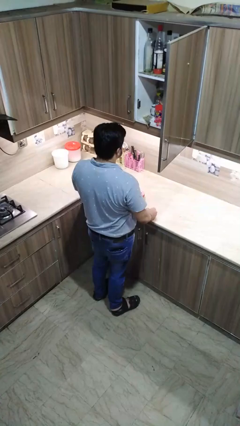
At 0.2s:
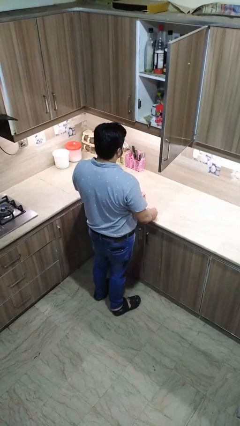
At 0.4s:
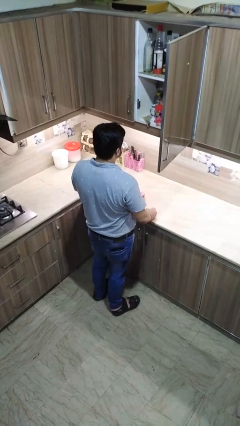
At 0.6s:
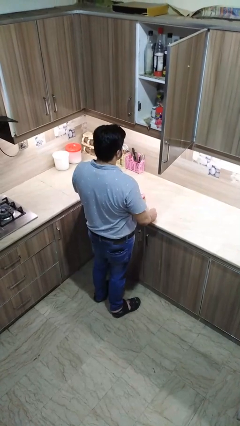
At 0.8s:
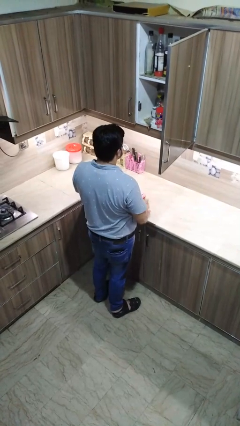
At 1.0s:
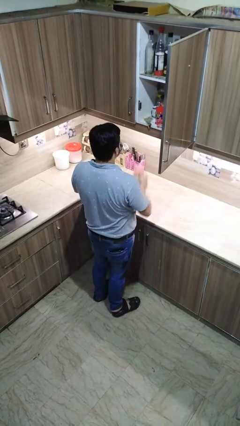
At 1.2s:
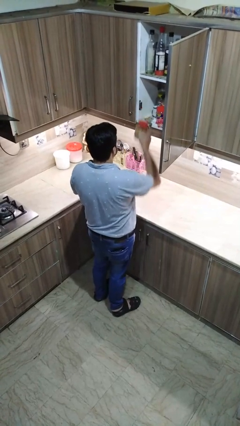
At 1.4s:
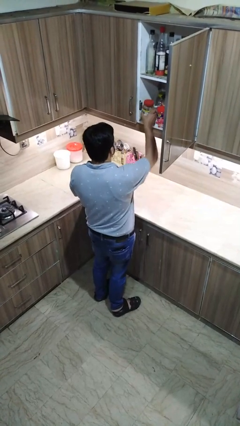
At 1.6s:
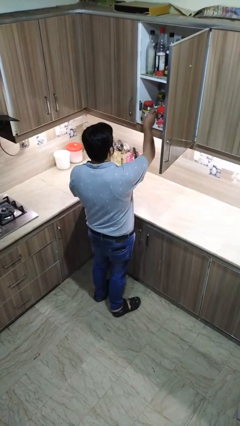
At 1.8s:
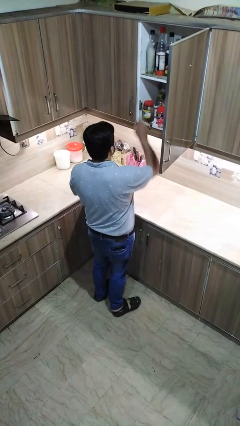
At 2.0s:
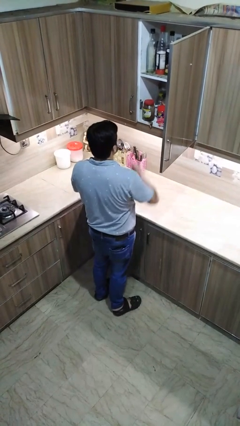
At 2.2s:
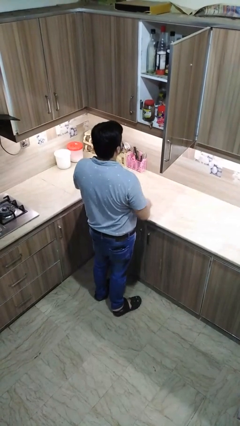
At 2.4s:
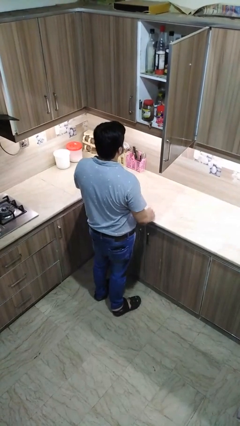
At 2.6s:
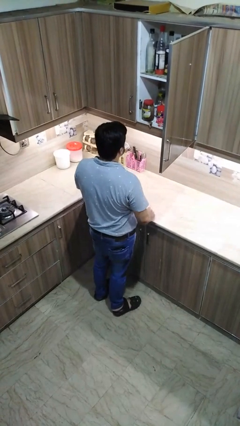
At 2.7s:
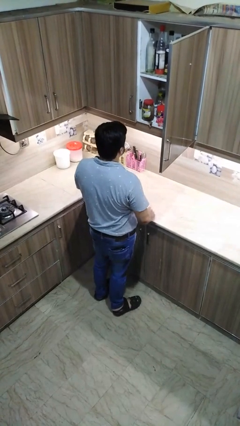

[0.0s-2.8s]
person takes object from cabinet

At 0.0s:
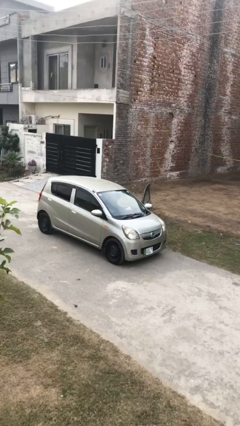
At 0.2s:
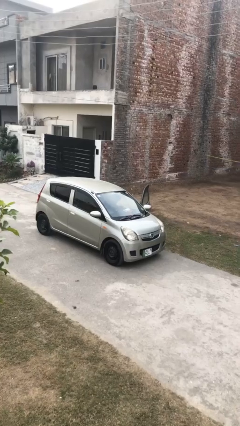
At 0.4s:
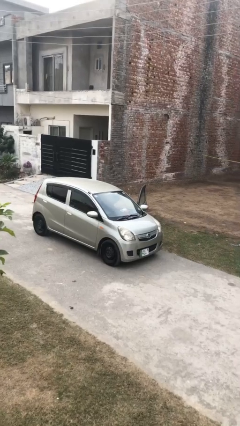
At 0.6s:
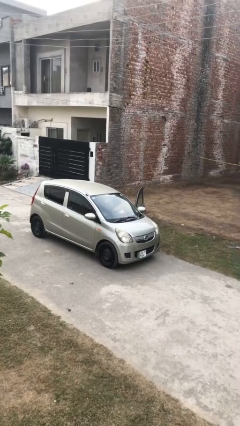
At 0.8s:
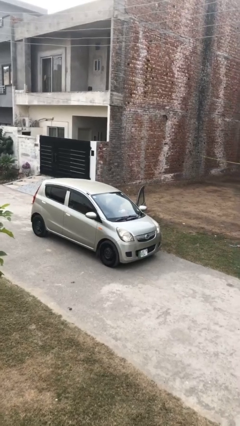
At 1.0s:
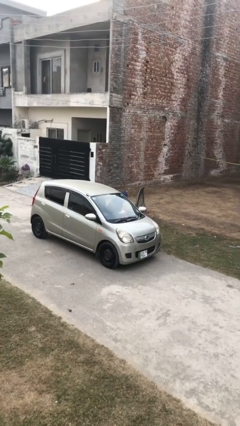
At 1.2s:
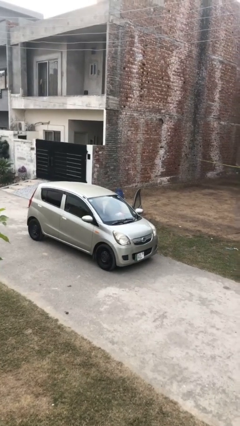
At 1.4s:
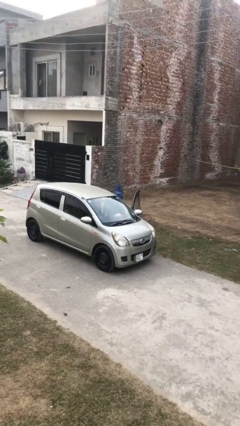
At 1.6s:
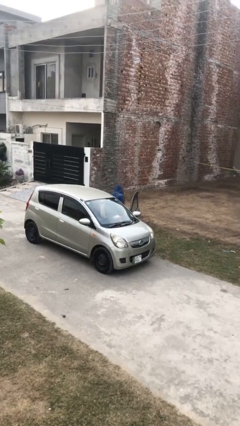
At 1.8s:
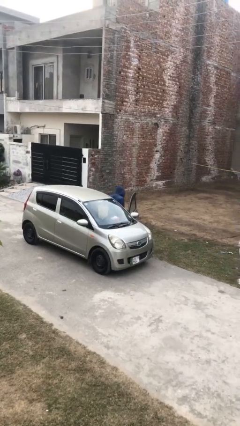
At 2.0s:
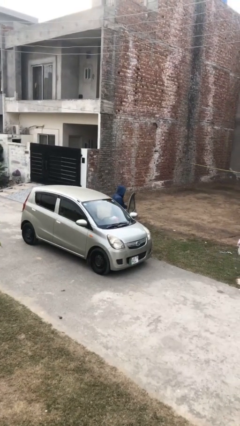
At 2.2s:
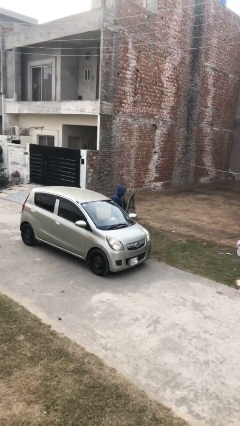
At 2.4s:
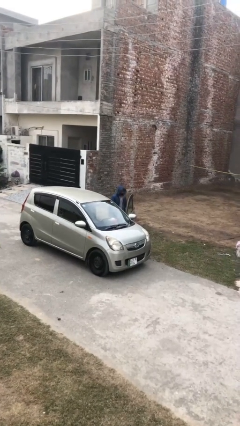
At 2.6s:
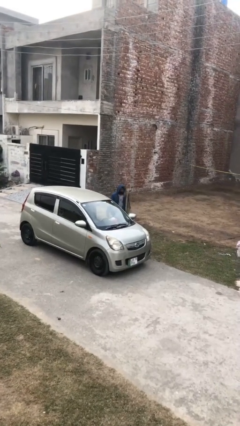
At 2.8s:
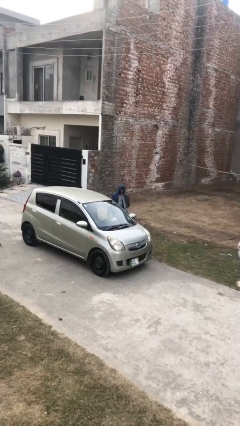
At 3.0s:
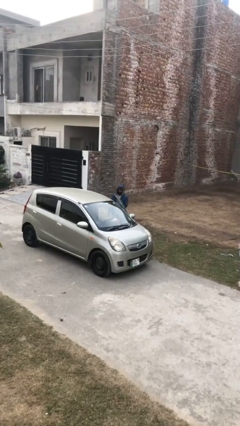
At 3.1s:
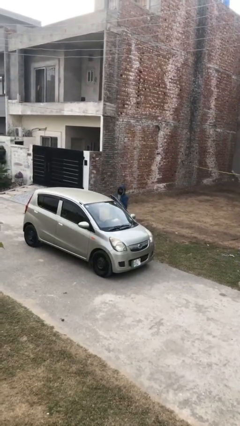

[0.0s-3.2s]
person exits car

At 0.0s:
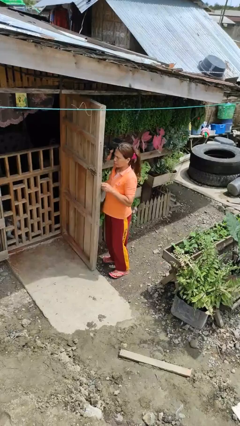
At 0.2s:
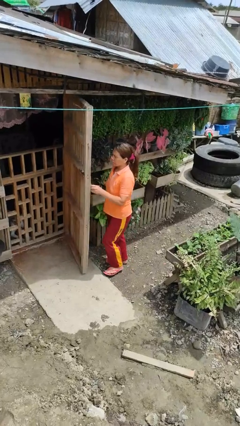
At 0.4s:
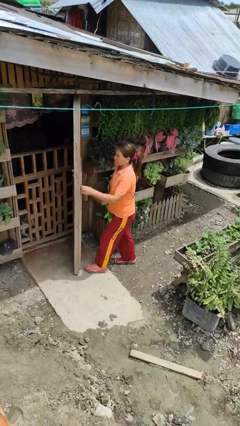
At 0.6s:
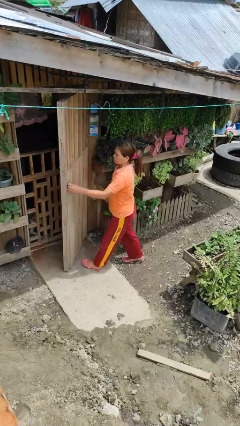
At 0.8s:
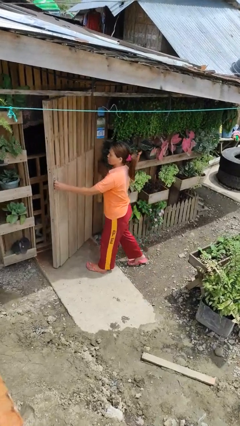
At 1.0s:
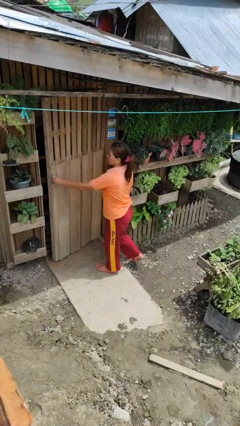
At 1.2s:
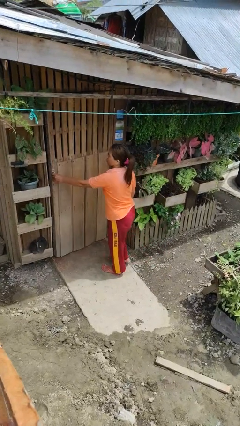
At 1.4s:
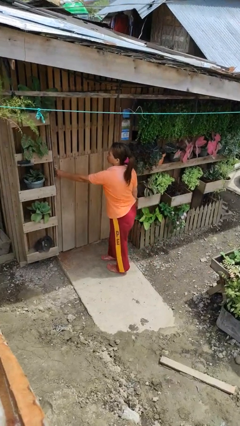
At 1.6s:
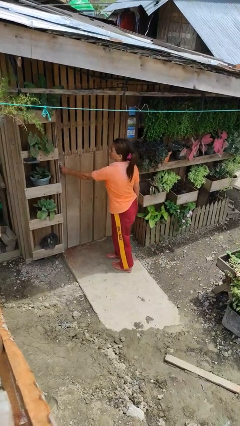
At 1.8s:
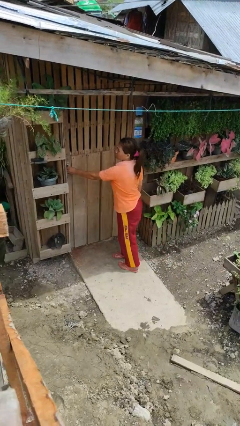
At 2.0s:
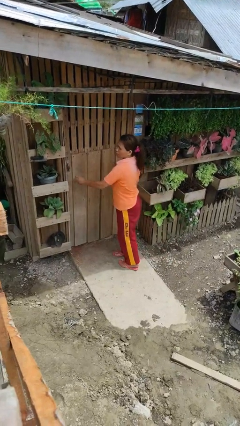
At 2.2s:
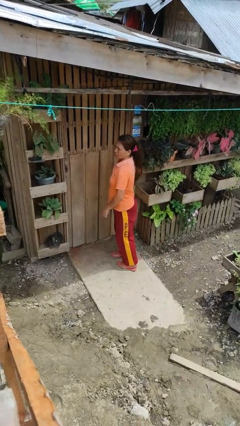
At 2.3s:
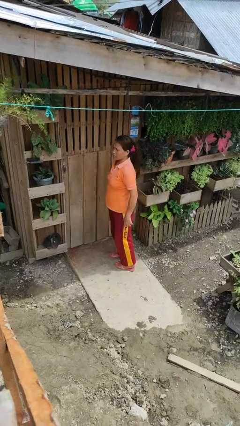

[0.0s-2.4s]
person closes facility door

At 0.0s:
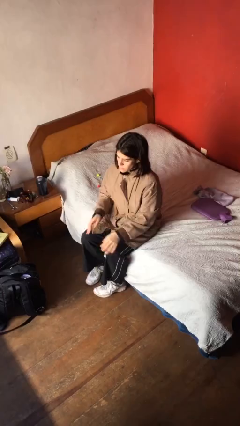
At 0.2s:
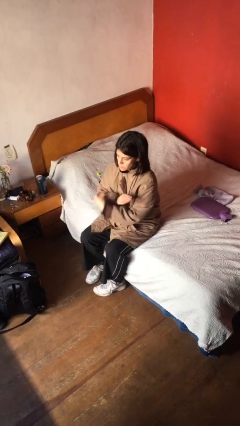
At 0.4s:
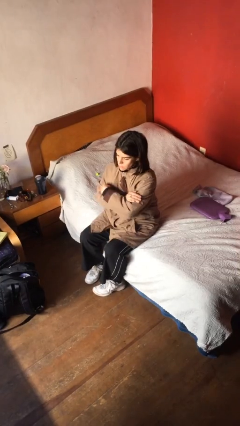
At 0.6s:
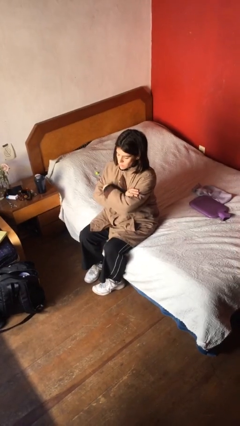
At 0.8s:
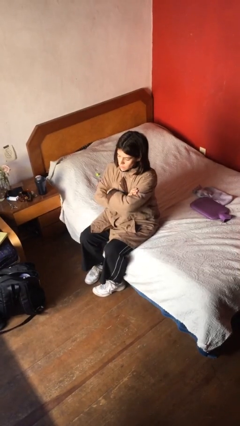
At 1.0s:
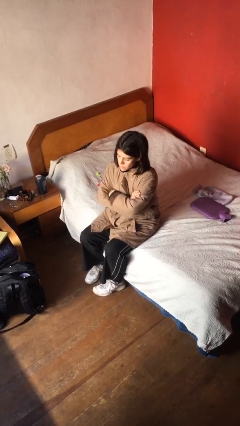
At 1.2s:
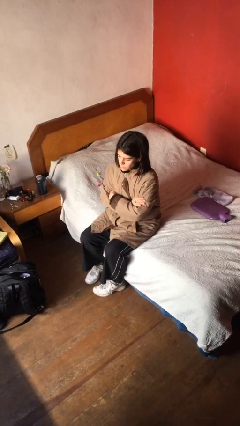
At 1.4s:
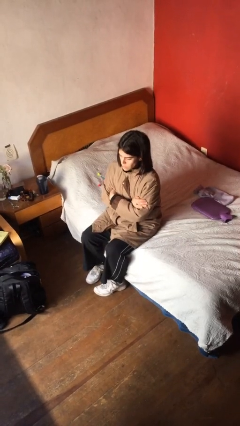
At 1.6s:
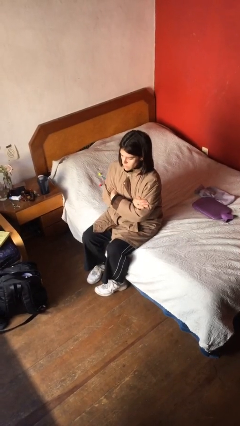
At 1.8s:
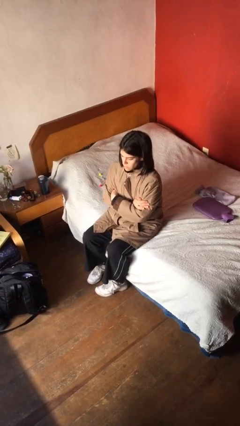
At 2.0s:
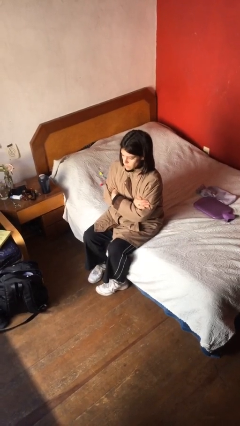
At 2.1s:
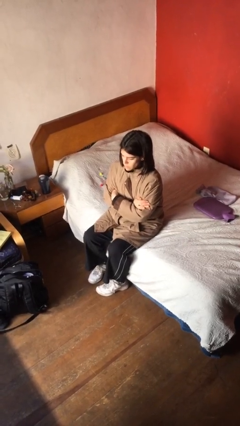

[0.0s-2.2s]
person crosses arms

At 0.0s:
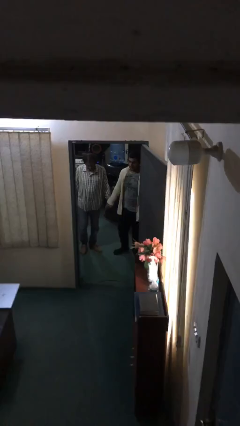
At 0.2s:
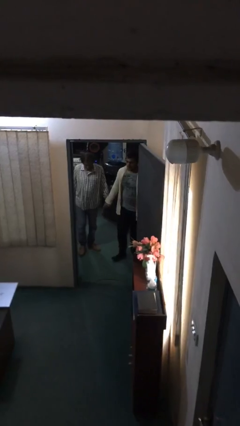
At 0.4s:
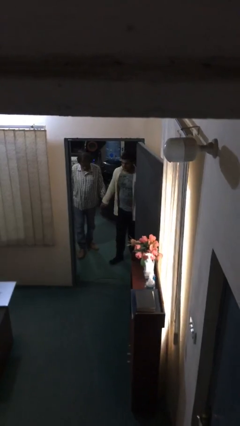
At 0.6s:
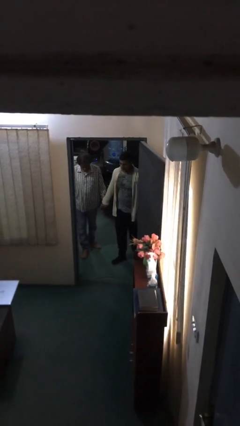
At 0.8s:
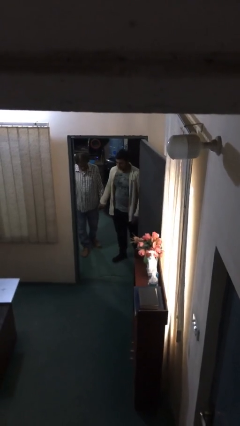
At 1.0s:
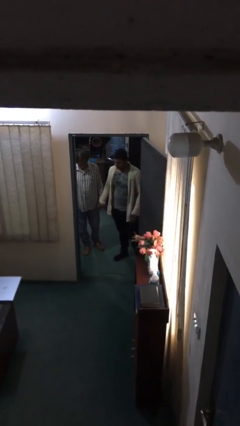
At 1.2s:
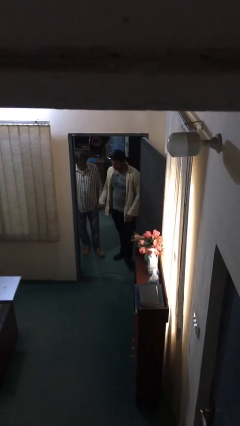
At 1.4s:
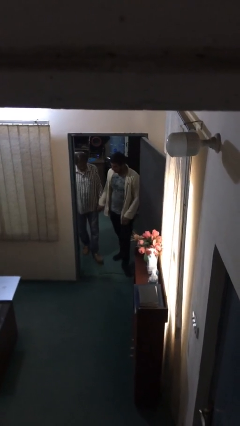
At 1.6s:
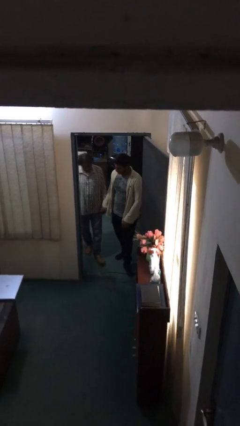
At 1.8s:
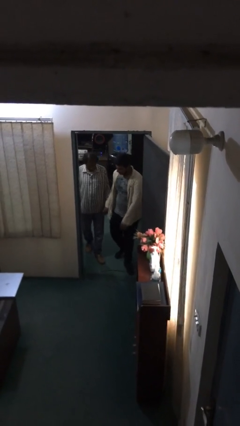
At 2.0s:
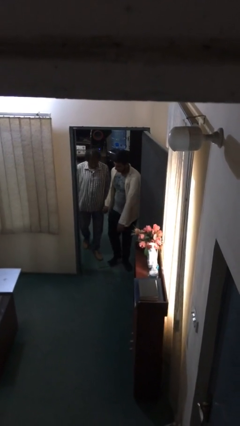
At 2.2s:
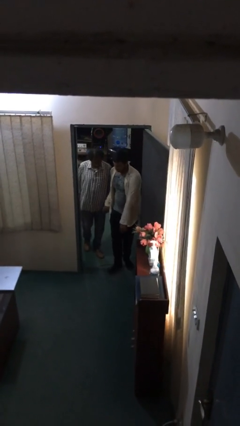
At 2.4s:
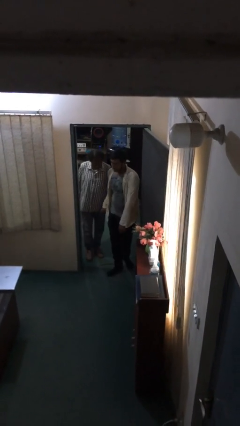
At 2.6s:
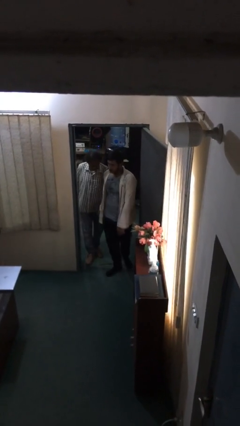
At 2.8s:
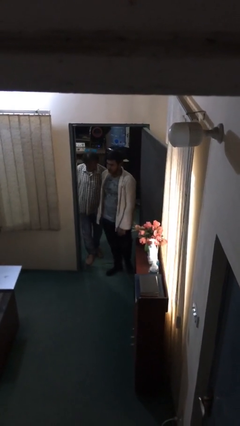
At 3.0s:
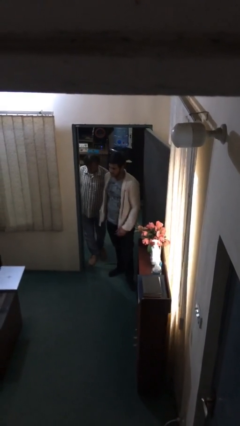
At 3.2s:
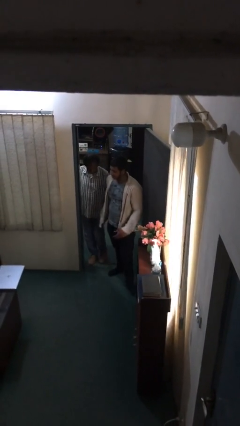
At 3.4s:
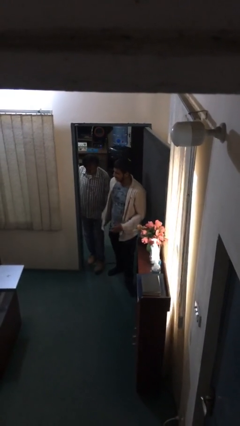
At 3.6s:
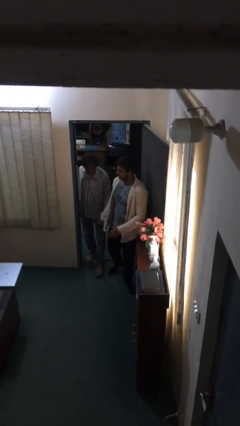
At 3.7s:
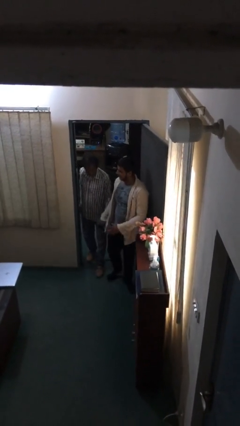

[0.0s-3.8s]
person holds hand

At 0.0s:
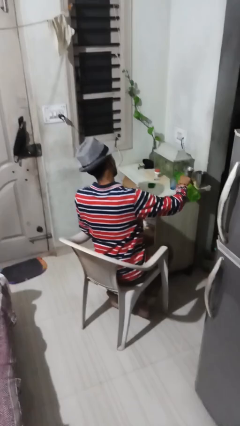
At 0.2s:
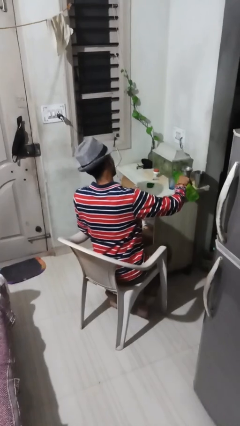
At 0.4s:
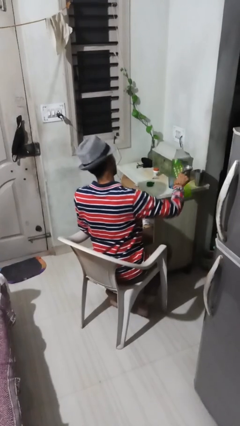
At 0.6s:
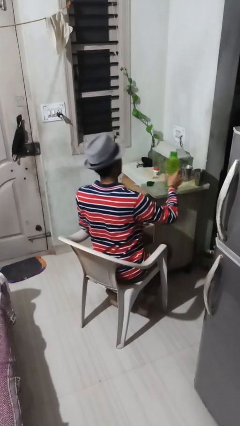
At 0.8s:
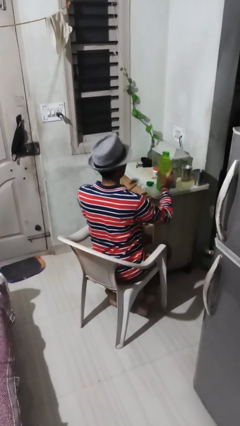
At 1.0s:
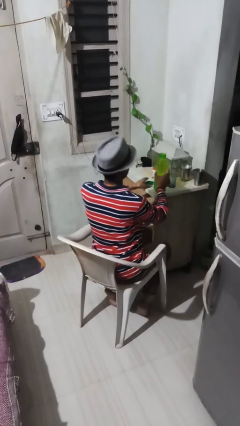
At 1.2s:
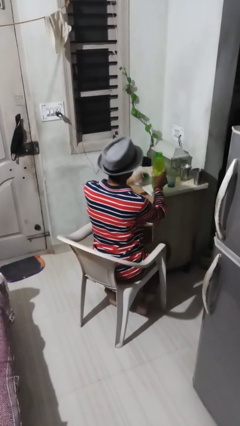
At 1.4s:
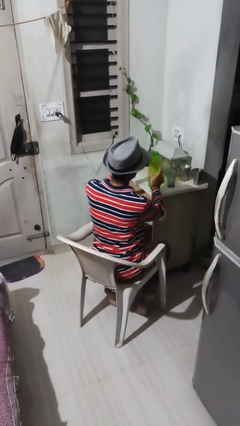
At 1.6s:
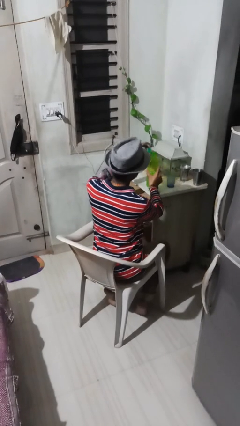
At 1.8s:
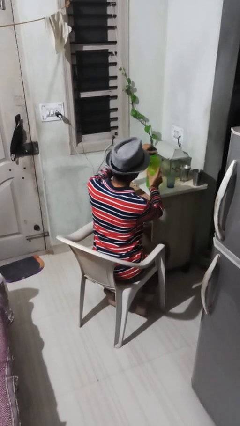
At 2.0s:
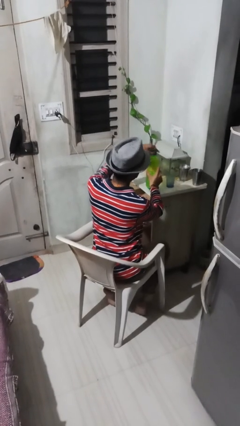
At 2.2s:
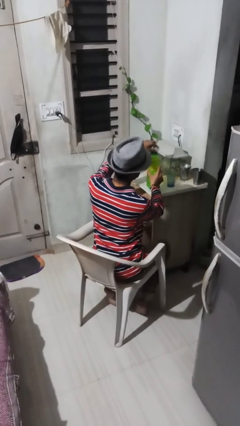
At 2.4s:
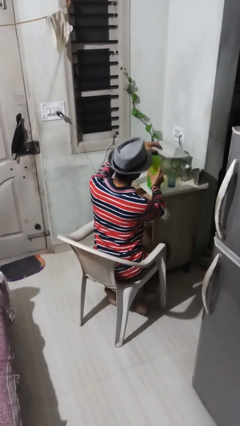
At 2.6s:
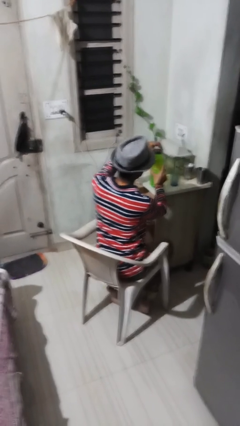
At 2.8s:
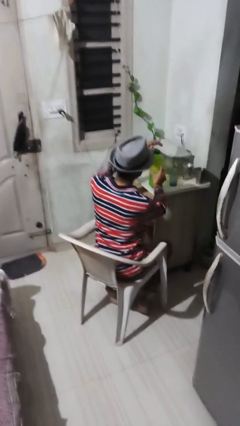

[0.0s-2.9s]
person screws lid to bottle
